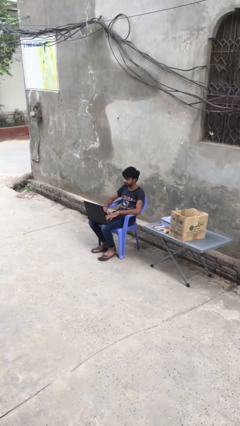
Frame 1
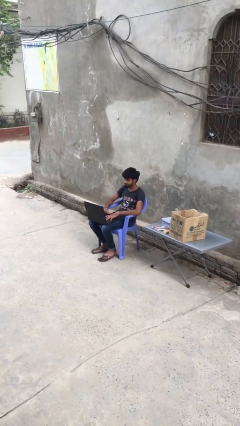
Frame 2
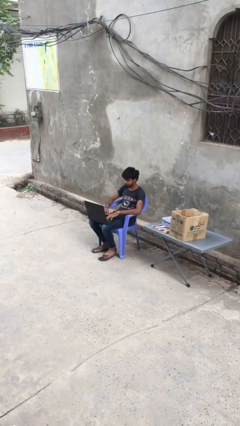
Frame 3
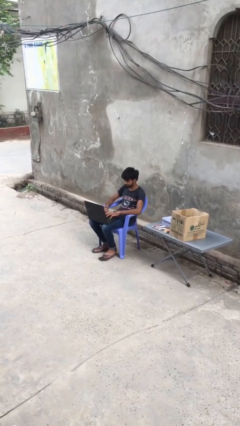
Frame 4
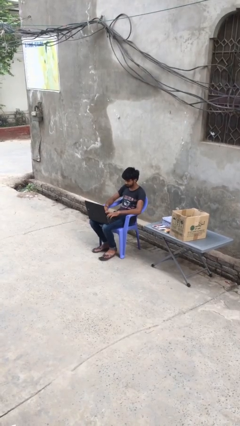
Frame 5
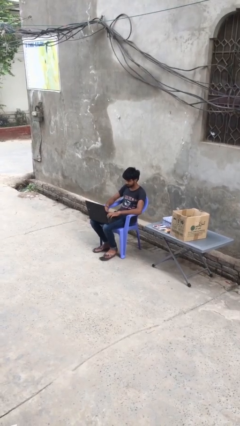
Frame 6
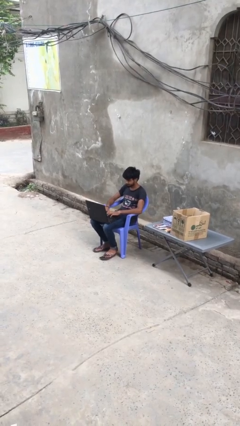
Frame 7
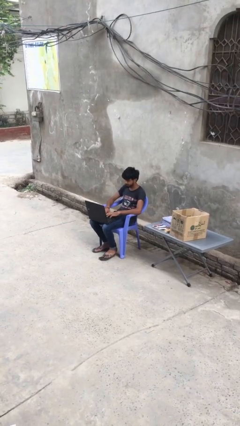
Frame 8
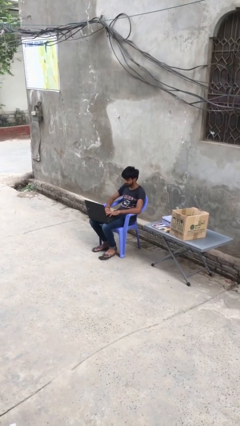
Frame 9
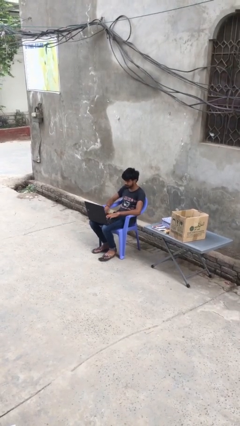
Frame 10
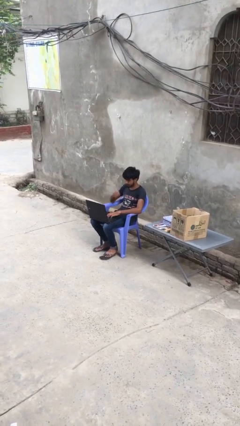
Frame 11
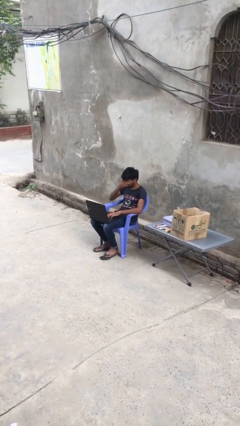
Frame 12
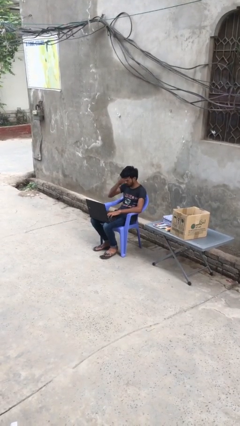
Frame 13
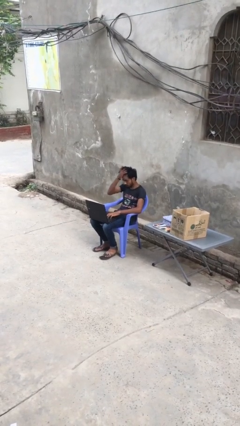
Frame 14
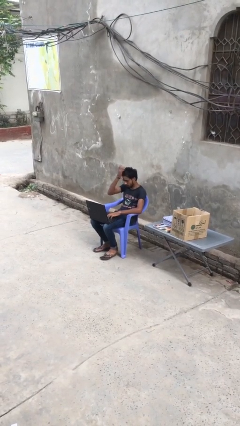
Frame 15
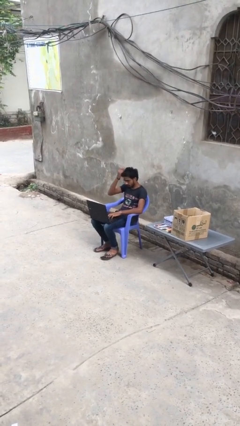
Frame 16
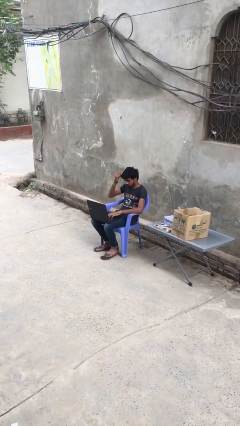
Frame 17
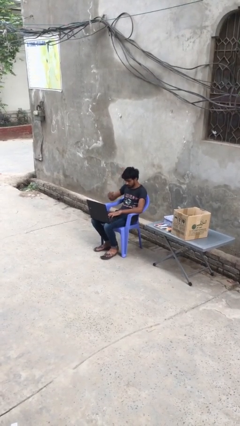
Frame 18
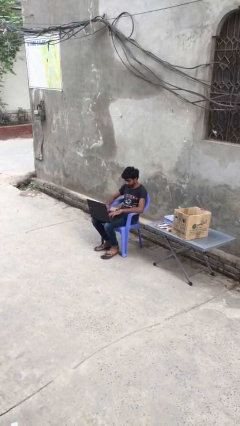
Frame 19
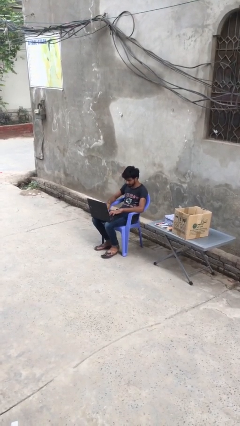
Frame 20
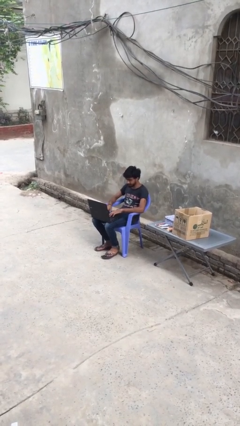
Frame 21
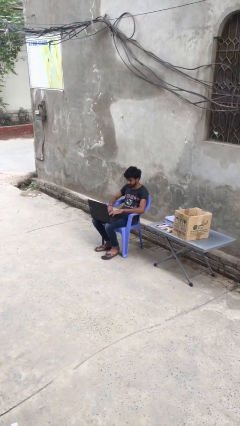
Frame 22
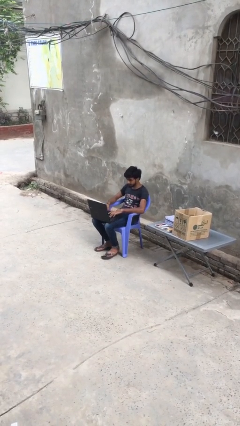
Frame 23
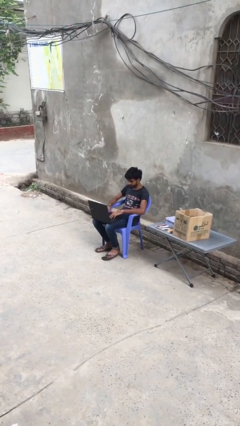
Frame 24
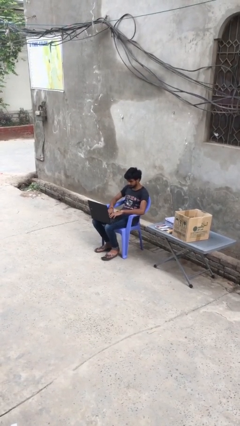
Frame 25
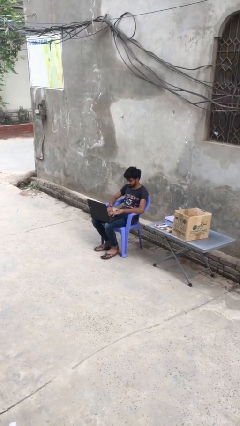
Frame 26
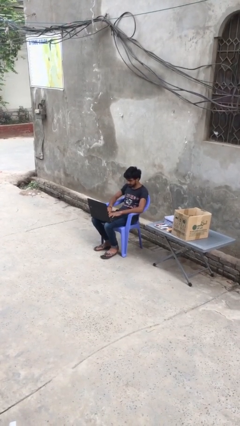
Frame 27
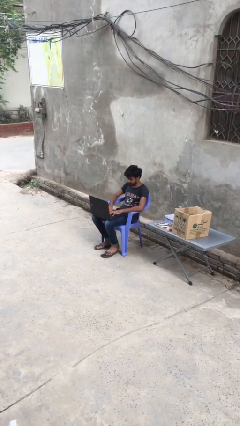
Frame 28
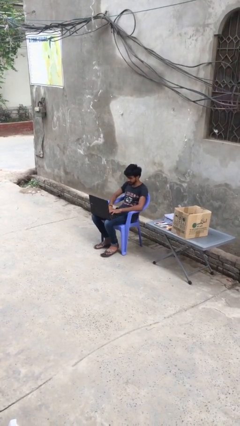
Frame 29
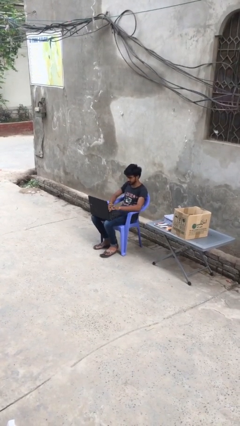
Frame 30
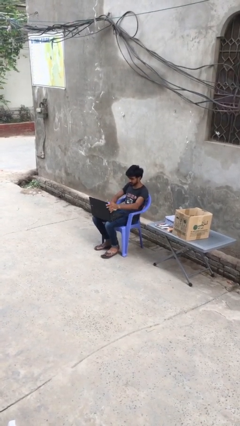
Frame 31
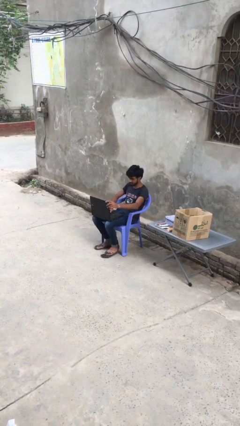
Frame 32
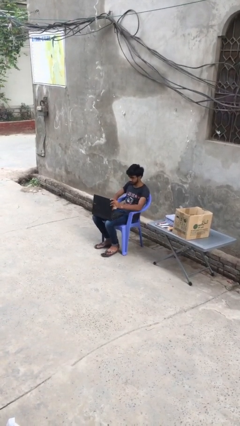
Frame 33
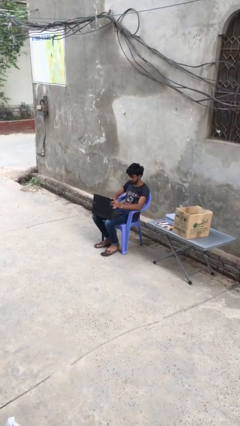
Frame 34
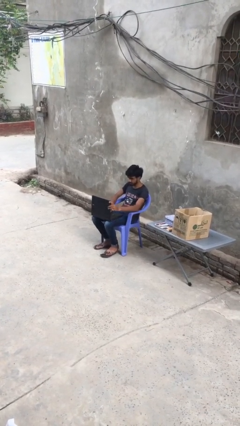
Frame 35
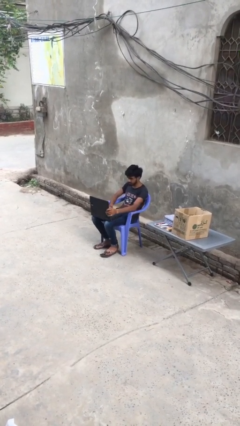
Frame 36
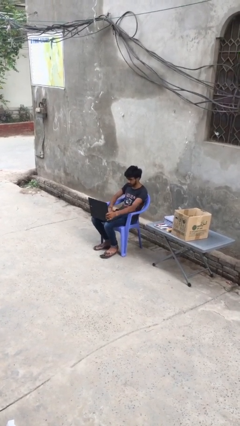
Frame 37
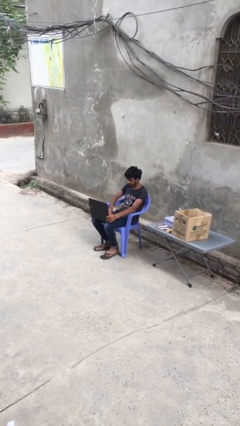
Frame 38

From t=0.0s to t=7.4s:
person interacts with laptop

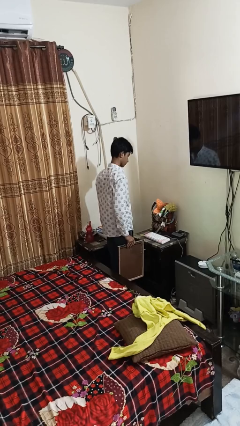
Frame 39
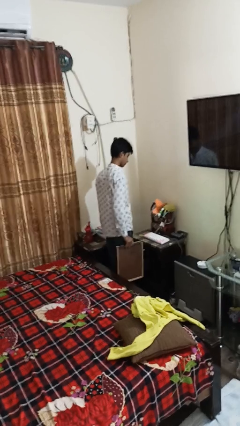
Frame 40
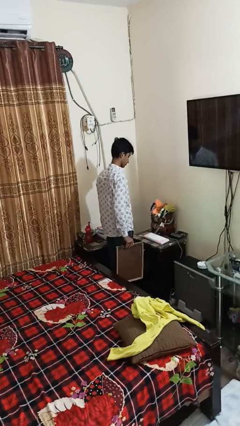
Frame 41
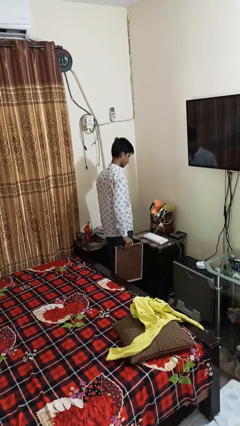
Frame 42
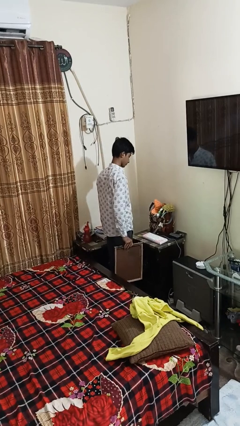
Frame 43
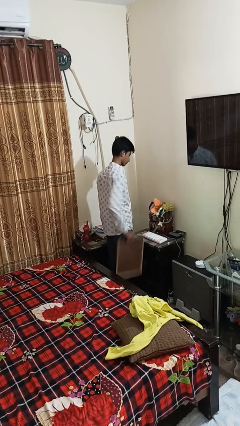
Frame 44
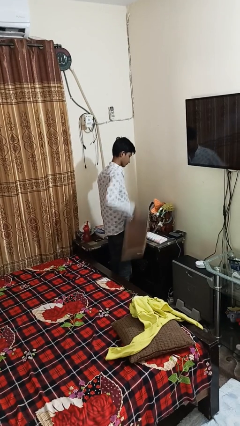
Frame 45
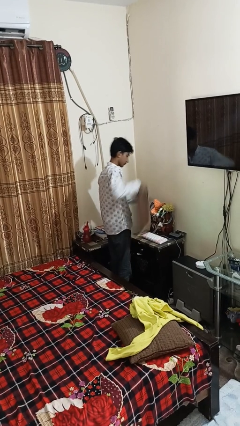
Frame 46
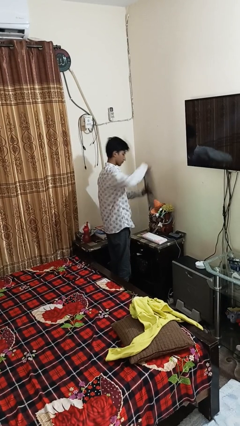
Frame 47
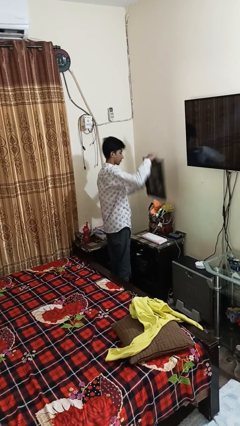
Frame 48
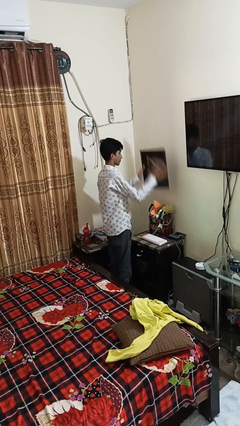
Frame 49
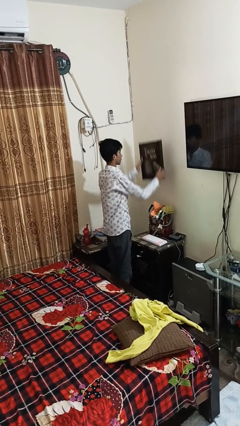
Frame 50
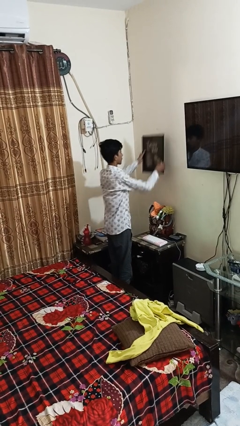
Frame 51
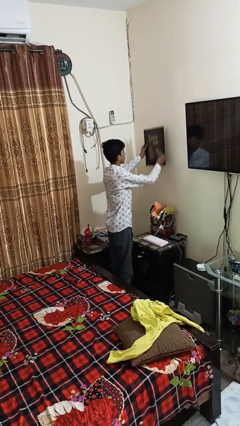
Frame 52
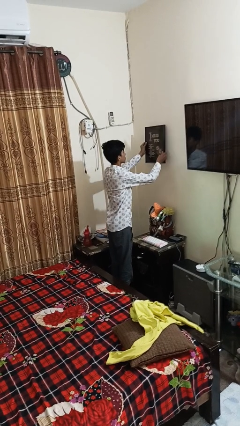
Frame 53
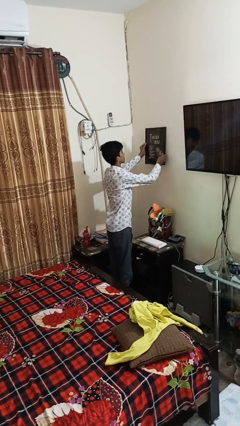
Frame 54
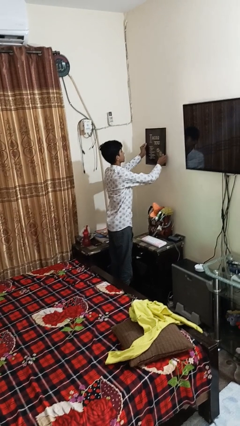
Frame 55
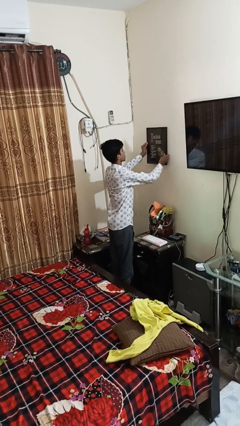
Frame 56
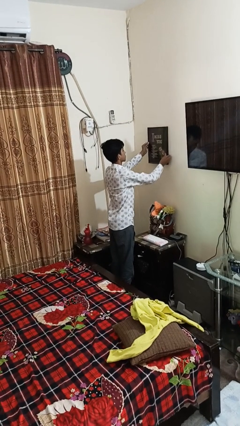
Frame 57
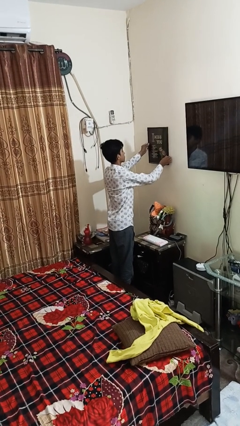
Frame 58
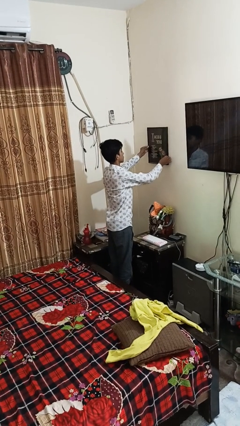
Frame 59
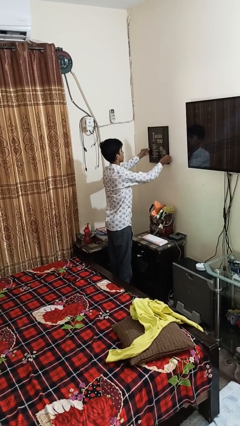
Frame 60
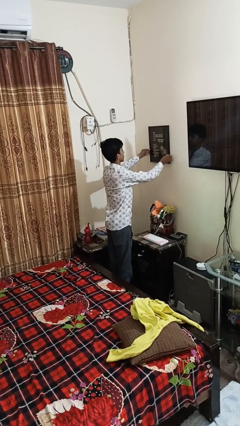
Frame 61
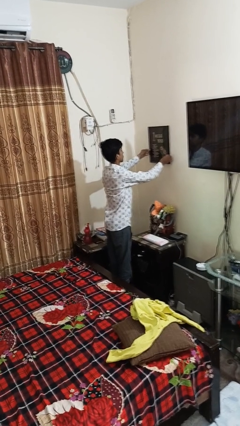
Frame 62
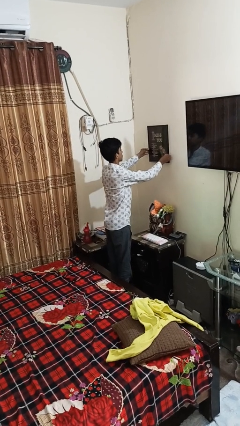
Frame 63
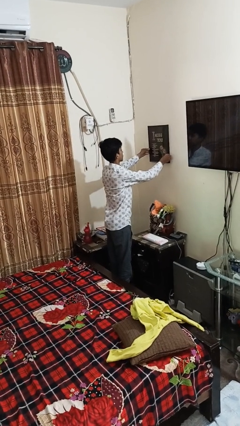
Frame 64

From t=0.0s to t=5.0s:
person puts up picture frame

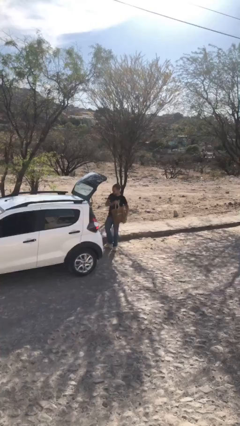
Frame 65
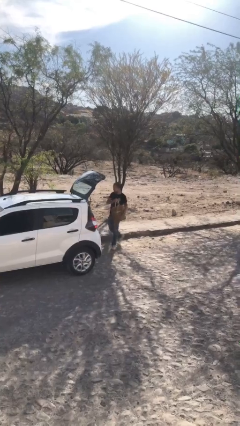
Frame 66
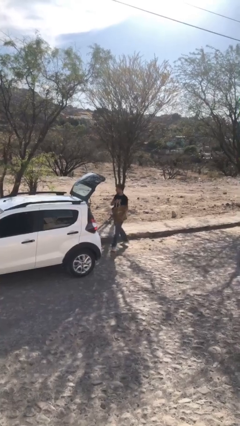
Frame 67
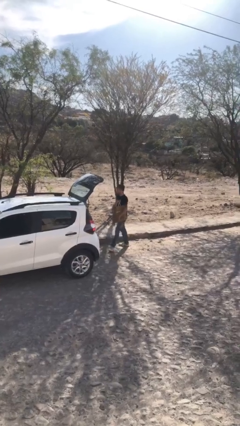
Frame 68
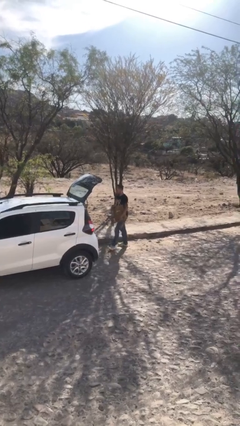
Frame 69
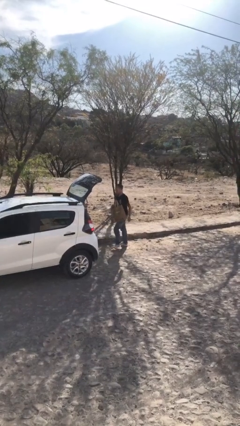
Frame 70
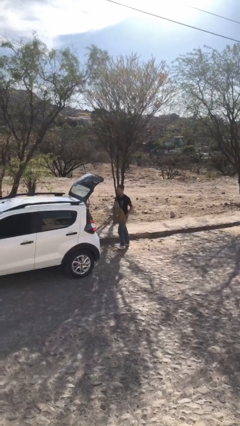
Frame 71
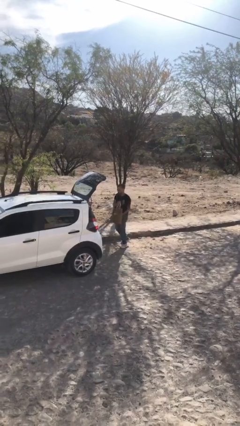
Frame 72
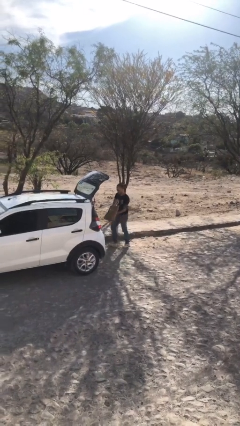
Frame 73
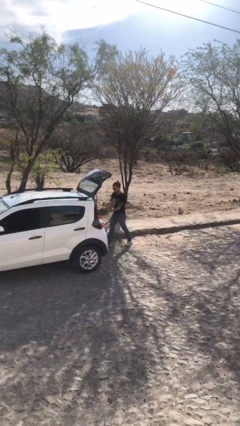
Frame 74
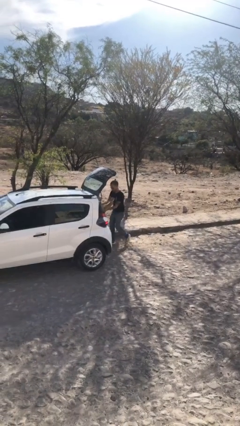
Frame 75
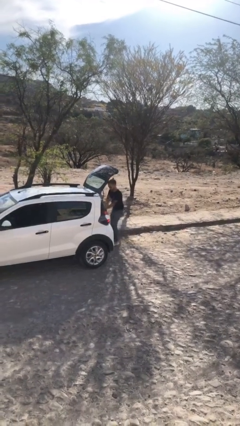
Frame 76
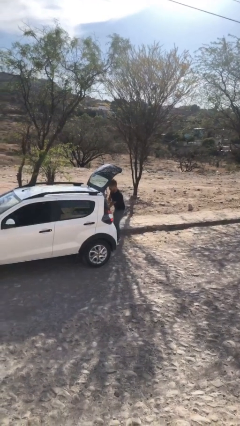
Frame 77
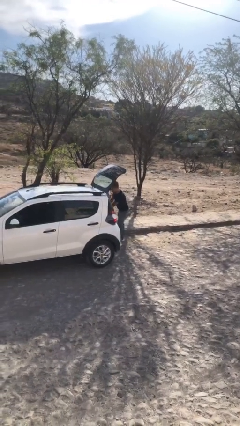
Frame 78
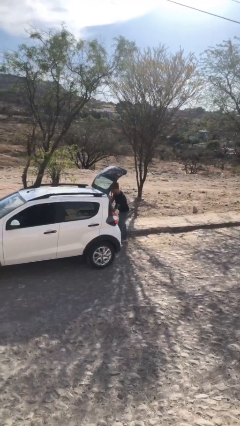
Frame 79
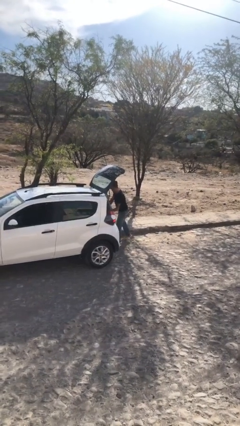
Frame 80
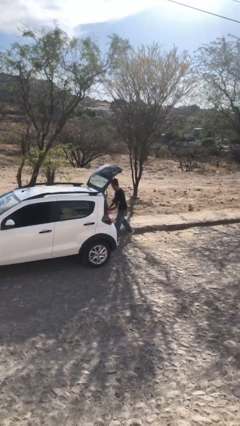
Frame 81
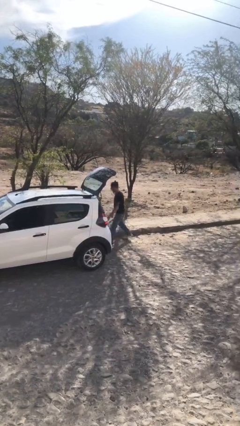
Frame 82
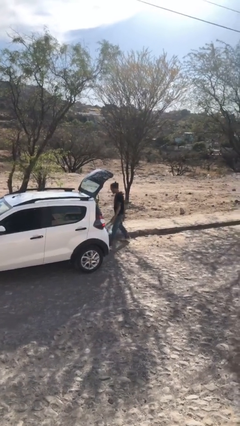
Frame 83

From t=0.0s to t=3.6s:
person loads car

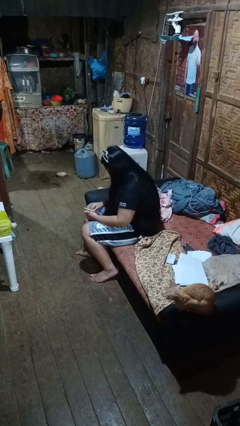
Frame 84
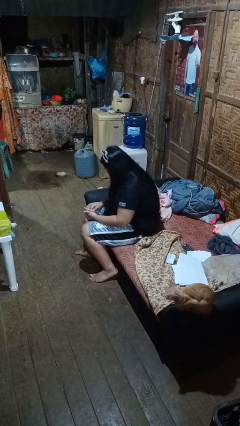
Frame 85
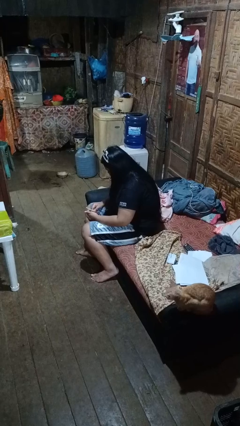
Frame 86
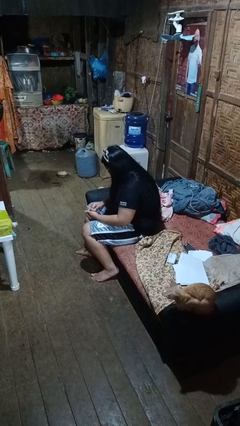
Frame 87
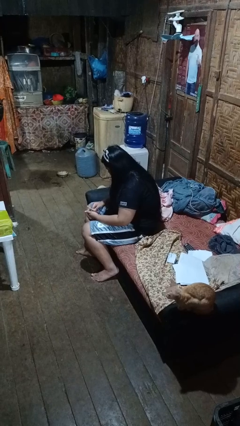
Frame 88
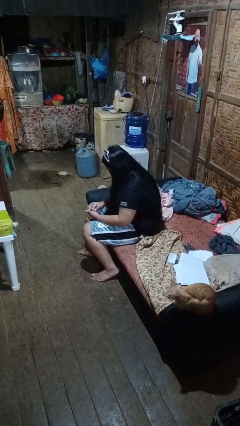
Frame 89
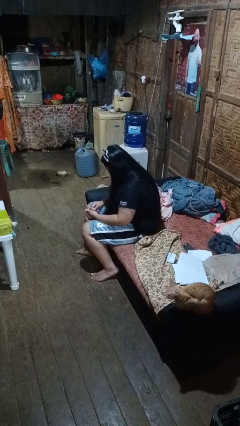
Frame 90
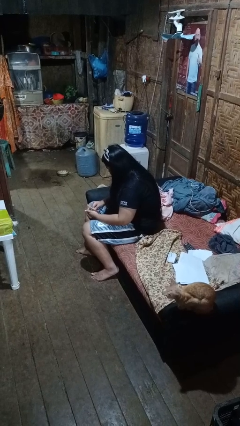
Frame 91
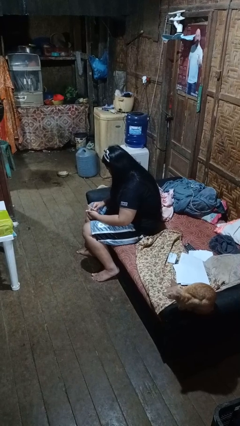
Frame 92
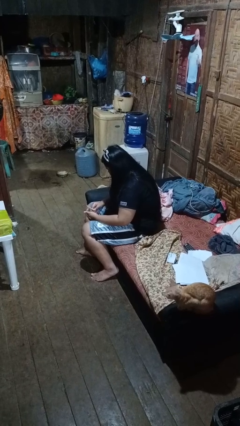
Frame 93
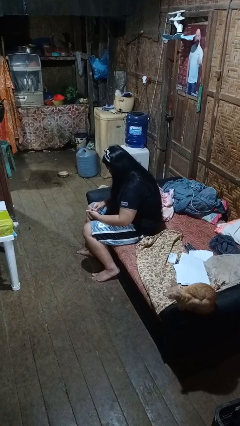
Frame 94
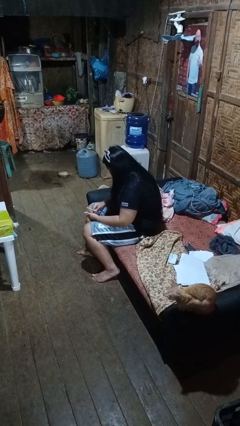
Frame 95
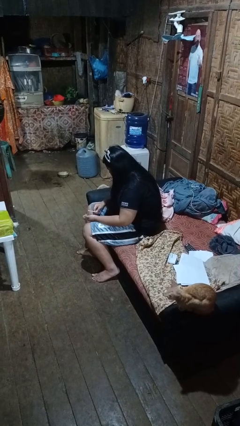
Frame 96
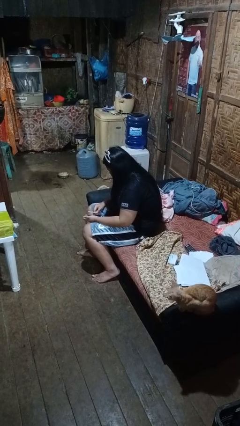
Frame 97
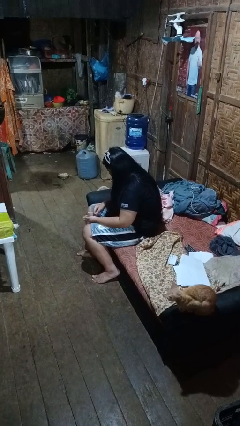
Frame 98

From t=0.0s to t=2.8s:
person files fingernails
